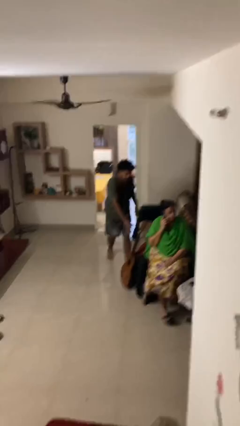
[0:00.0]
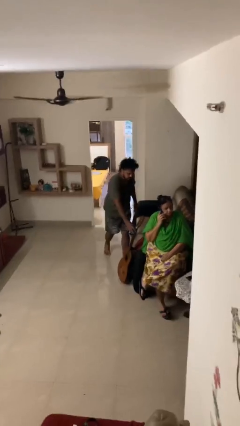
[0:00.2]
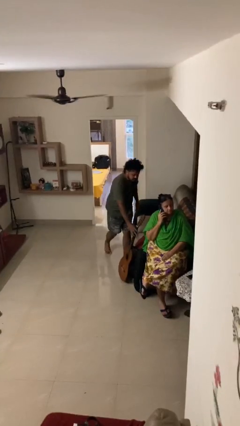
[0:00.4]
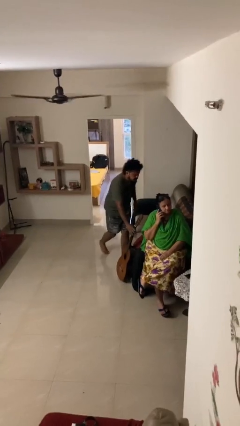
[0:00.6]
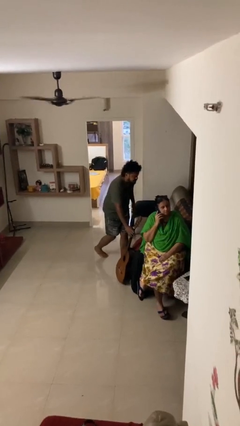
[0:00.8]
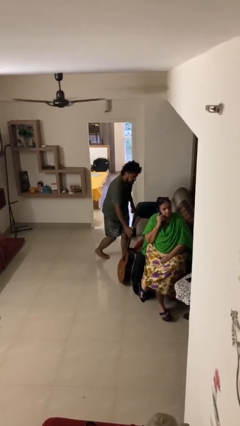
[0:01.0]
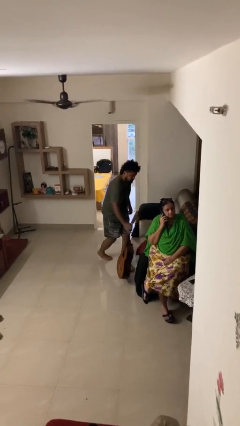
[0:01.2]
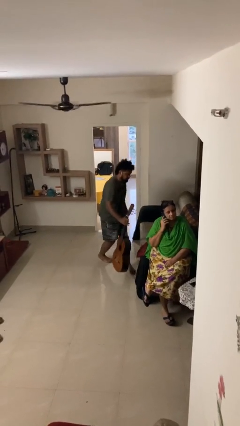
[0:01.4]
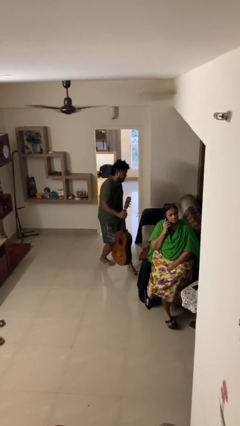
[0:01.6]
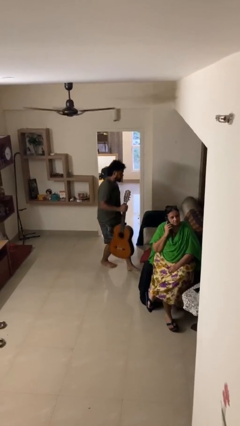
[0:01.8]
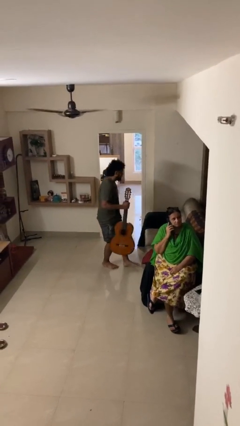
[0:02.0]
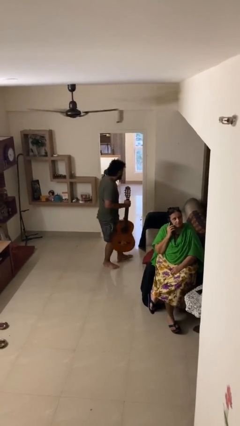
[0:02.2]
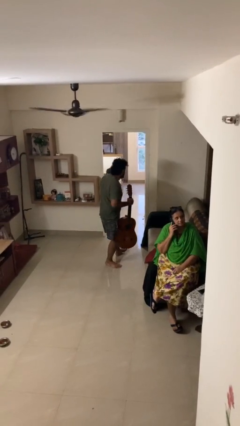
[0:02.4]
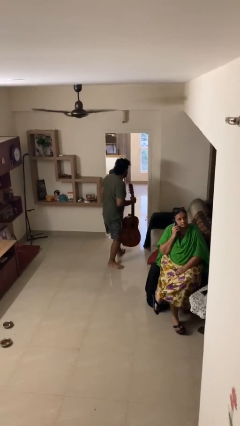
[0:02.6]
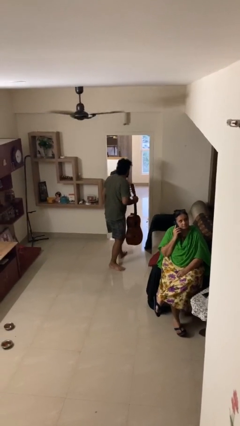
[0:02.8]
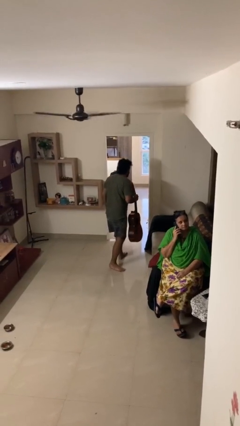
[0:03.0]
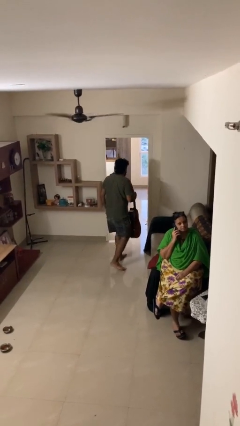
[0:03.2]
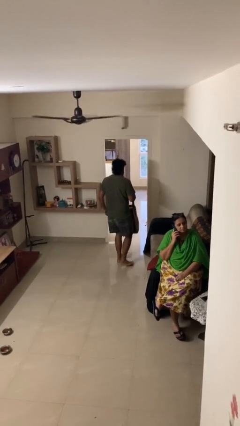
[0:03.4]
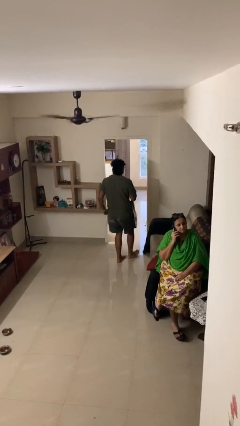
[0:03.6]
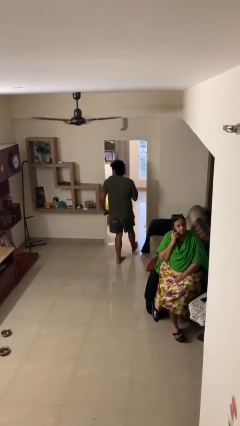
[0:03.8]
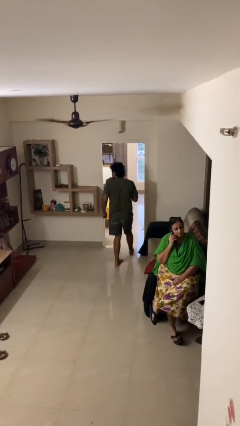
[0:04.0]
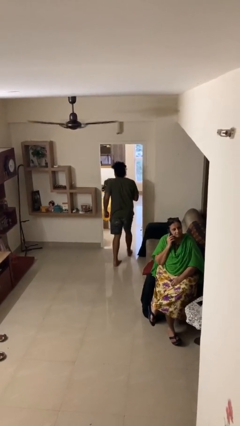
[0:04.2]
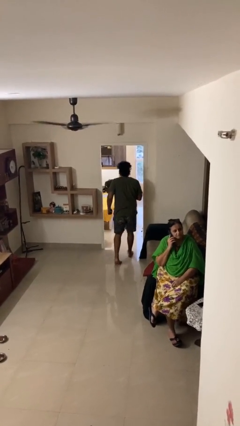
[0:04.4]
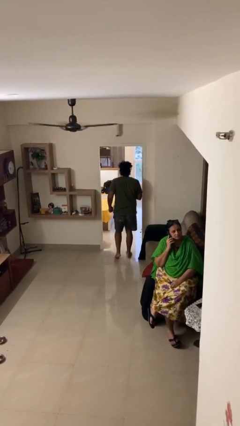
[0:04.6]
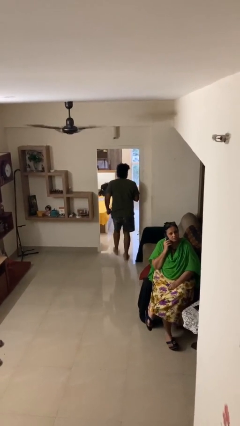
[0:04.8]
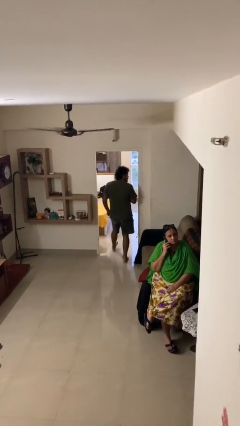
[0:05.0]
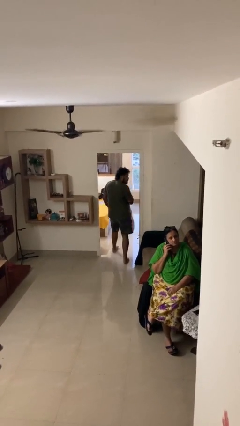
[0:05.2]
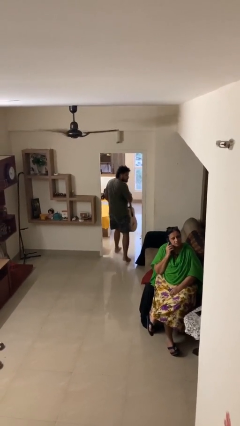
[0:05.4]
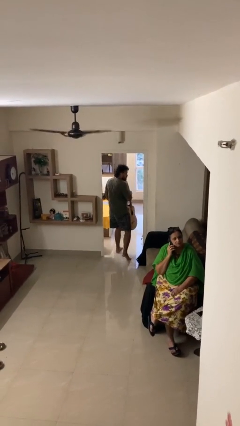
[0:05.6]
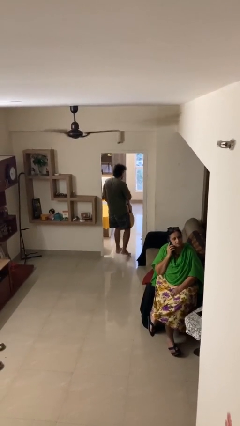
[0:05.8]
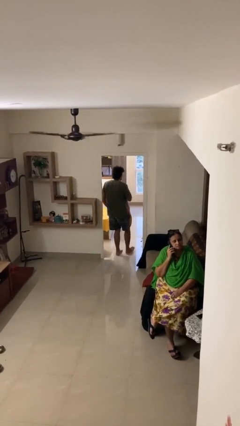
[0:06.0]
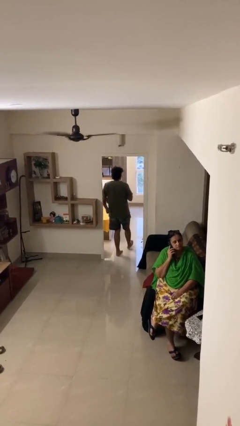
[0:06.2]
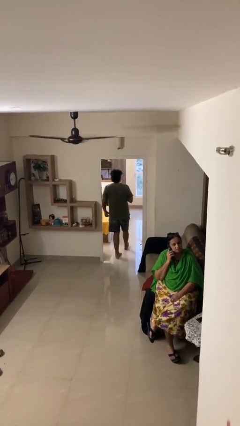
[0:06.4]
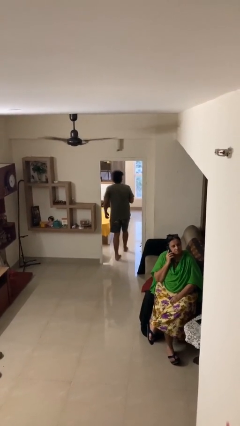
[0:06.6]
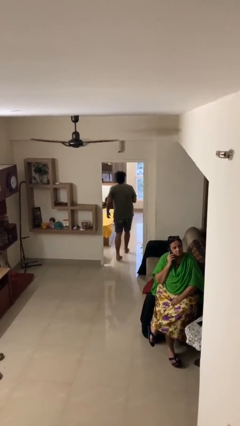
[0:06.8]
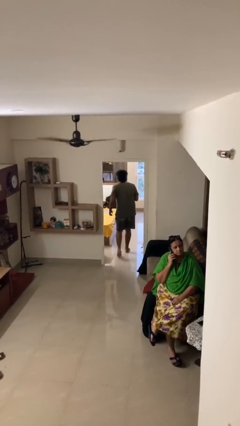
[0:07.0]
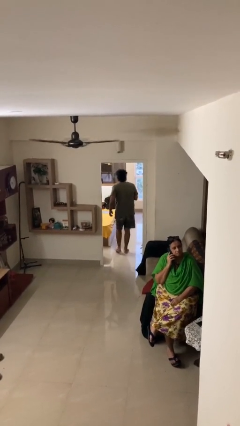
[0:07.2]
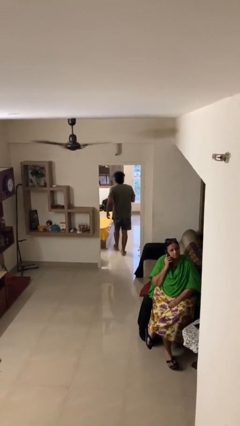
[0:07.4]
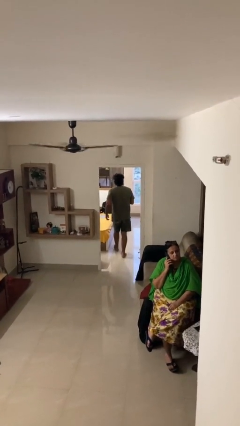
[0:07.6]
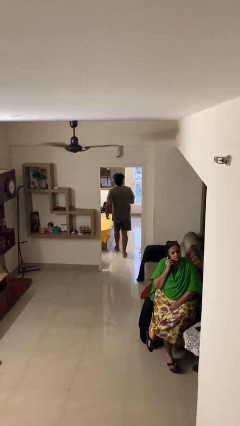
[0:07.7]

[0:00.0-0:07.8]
person steals object from person

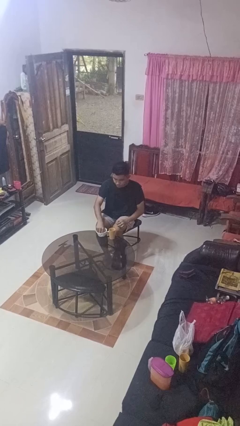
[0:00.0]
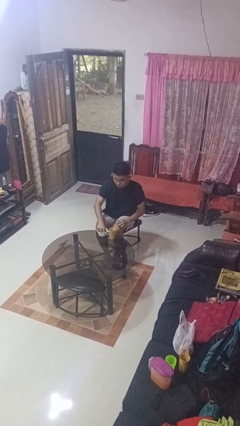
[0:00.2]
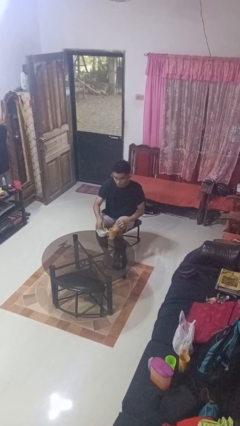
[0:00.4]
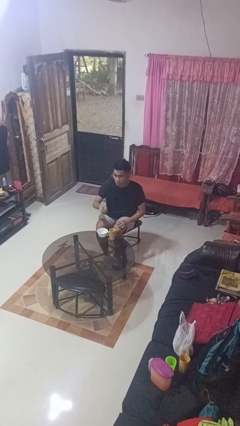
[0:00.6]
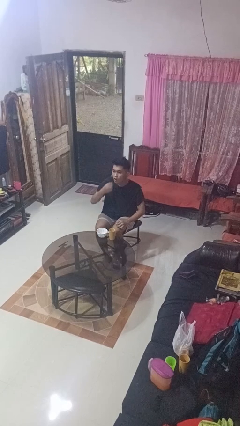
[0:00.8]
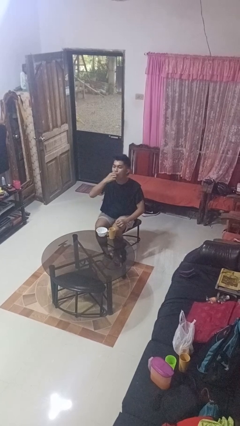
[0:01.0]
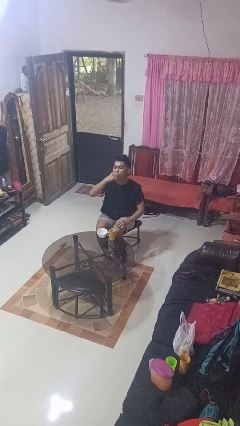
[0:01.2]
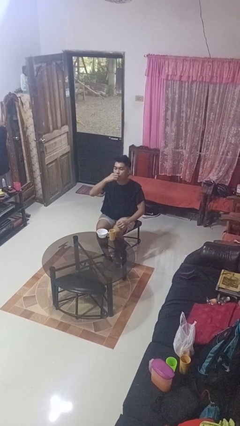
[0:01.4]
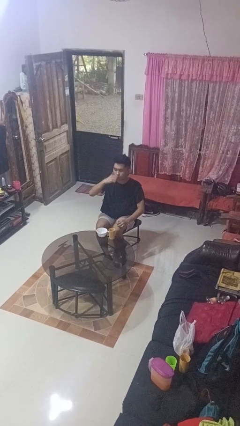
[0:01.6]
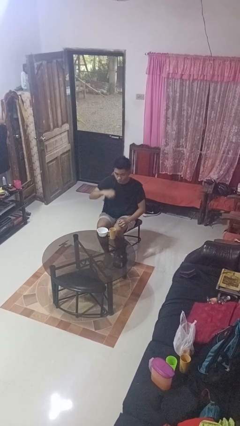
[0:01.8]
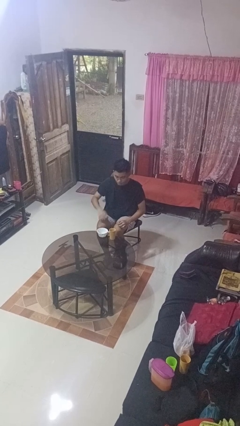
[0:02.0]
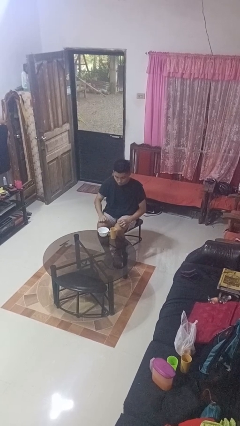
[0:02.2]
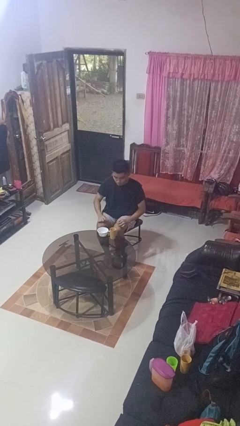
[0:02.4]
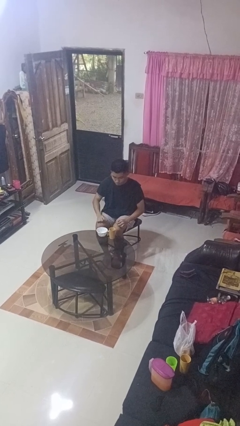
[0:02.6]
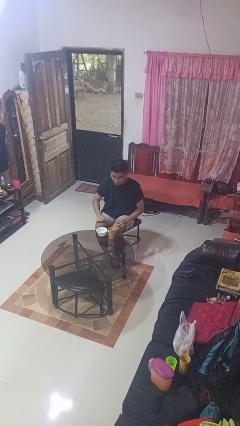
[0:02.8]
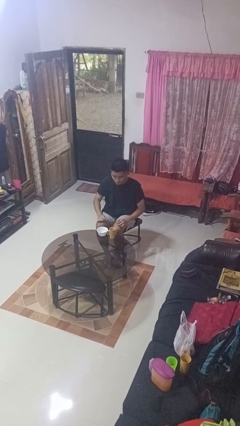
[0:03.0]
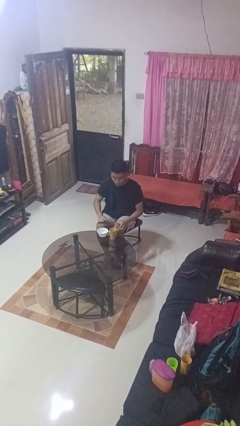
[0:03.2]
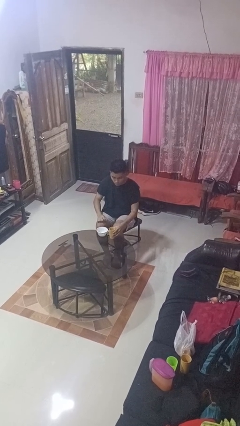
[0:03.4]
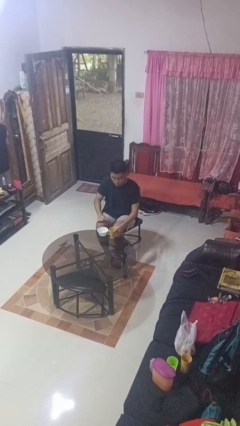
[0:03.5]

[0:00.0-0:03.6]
person takes medicine pills

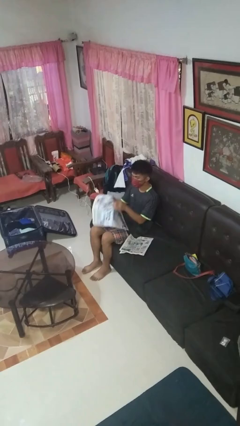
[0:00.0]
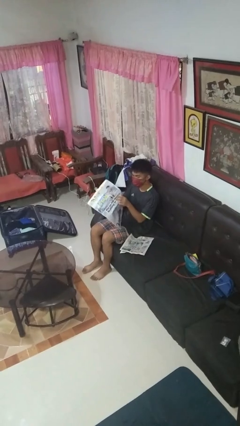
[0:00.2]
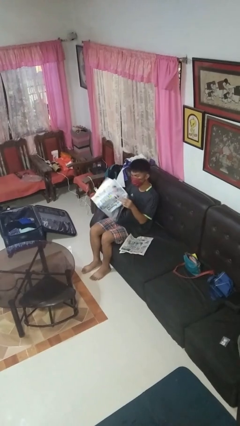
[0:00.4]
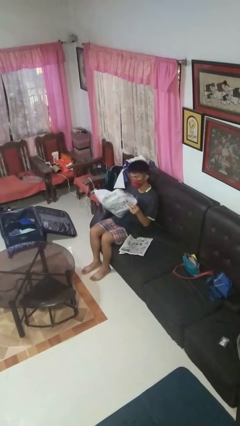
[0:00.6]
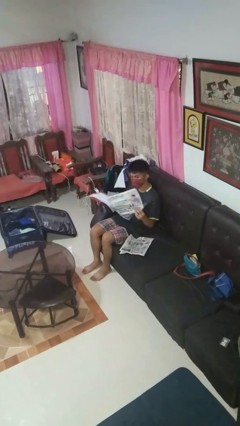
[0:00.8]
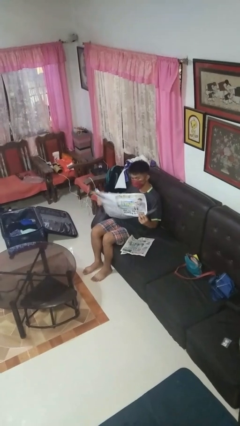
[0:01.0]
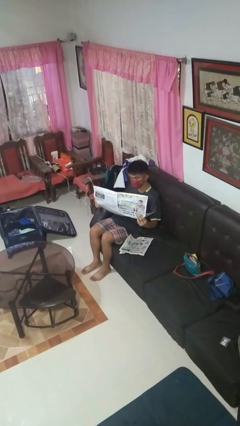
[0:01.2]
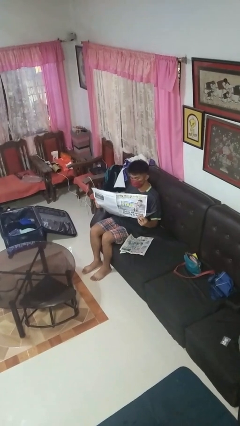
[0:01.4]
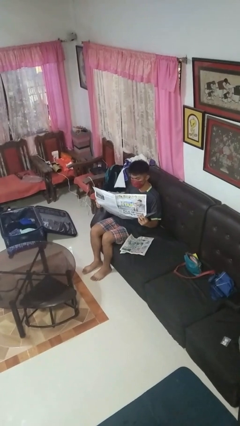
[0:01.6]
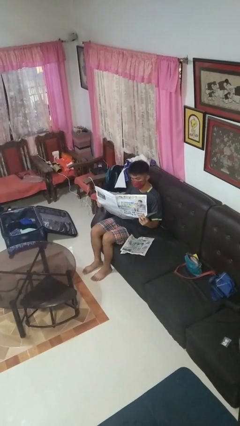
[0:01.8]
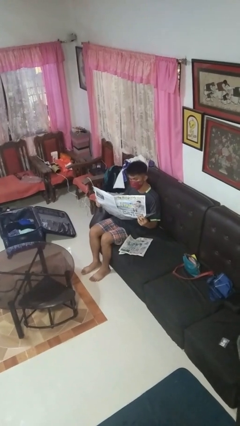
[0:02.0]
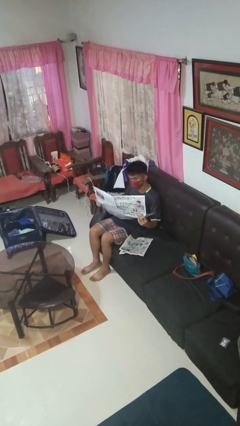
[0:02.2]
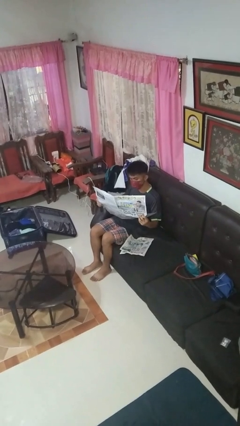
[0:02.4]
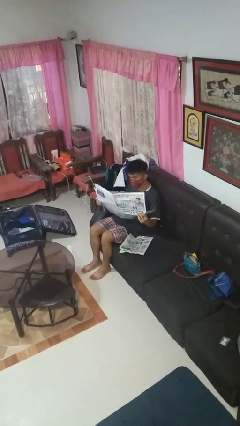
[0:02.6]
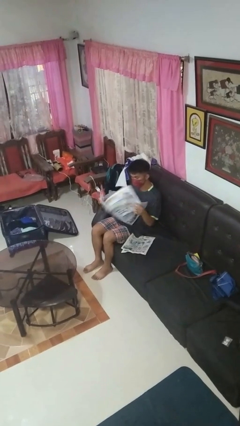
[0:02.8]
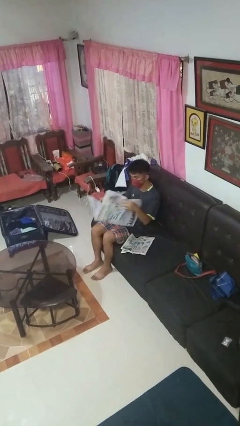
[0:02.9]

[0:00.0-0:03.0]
person reads newspaper

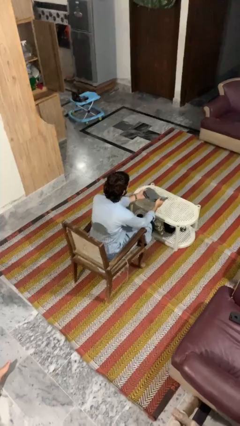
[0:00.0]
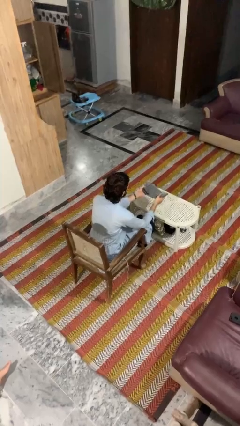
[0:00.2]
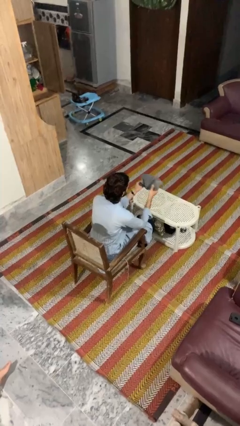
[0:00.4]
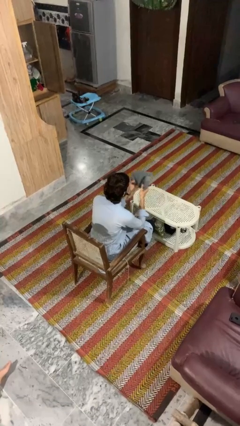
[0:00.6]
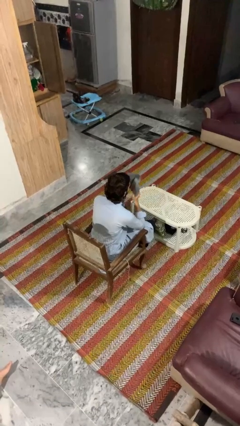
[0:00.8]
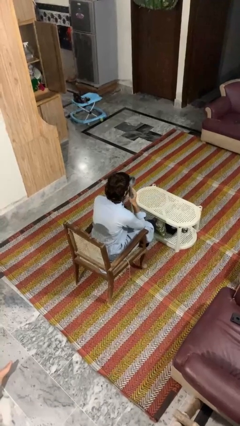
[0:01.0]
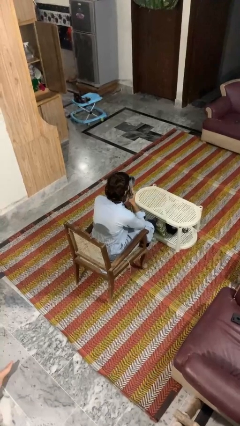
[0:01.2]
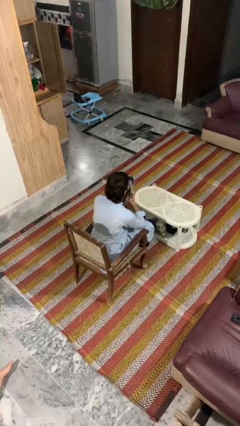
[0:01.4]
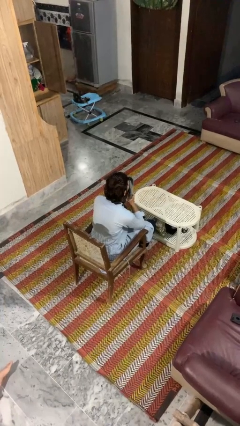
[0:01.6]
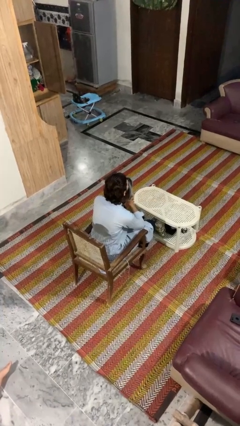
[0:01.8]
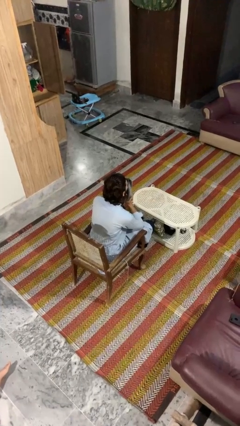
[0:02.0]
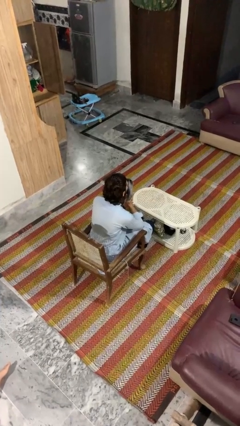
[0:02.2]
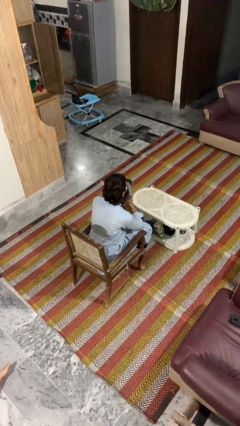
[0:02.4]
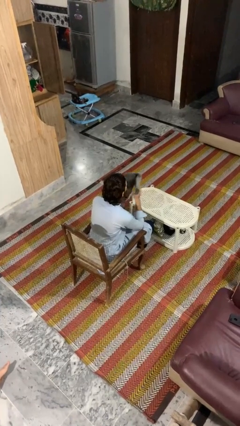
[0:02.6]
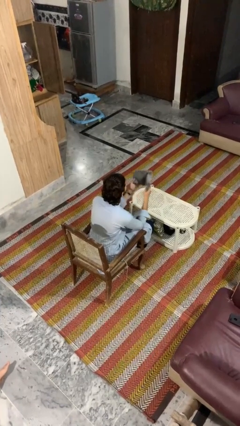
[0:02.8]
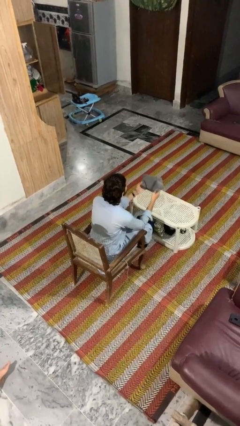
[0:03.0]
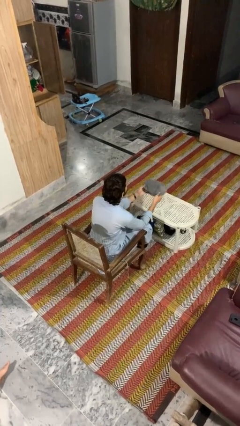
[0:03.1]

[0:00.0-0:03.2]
person wipes mouth with napkin
